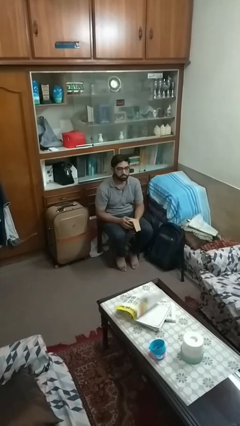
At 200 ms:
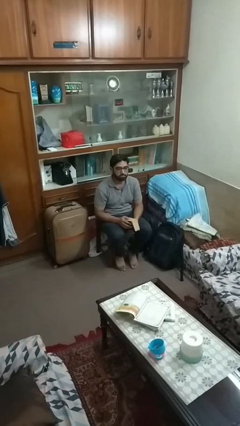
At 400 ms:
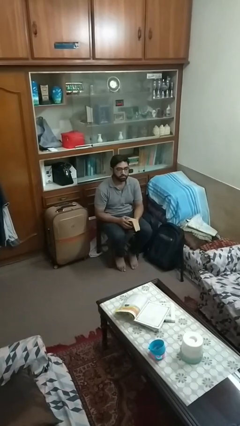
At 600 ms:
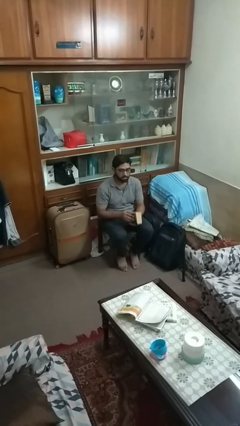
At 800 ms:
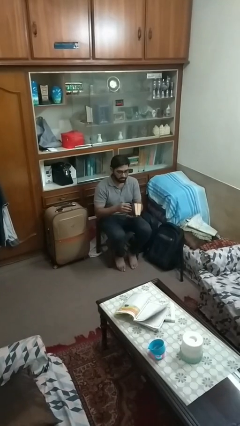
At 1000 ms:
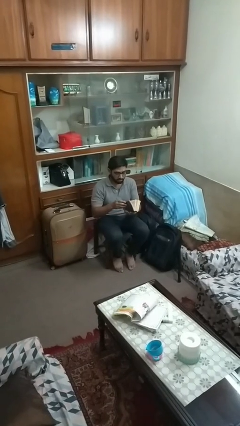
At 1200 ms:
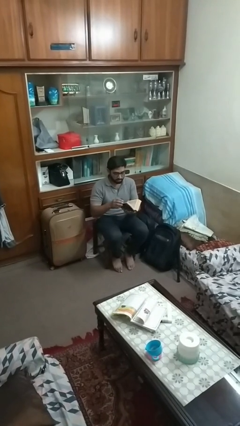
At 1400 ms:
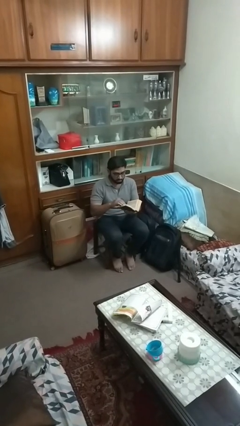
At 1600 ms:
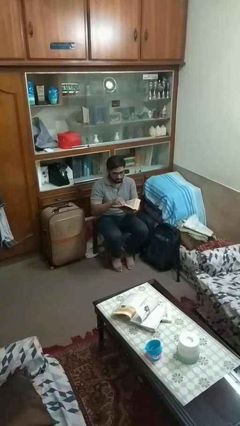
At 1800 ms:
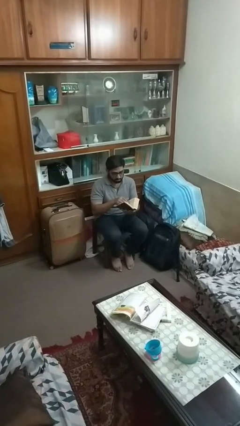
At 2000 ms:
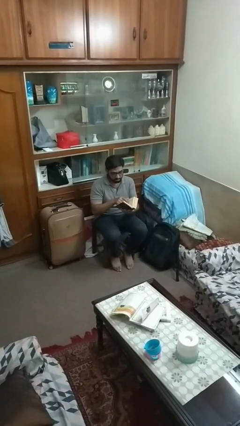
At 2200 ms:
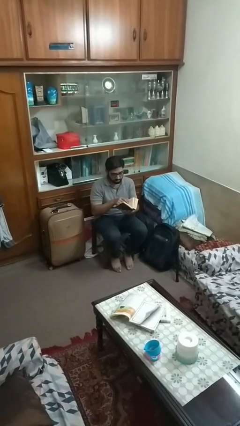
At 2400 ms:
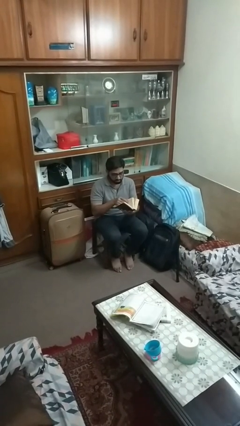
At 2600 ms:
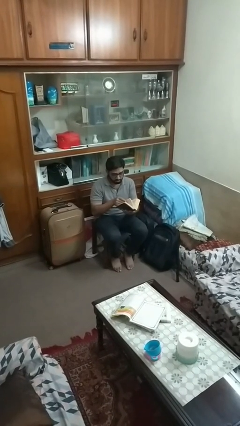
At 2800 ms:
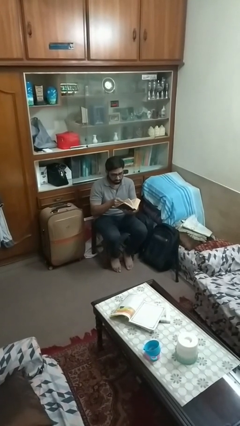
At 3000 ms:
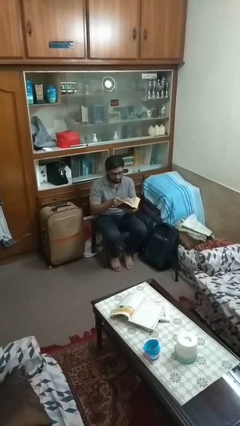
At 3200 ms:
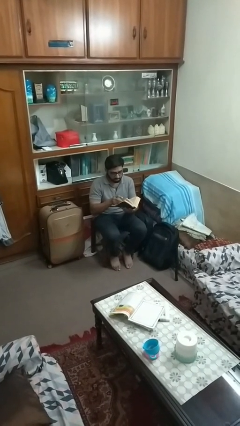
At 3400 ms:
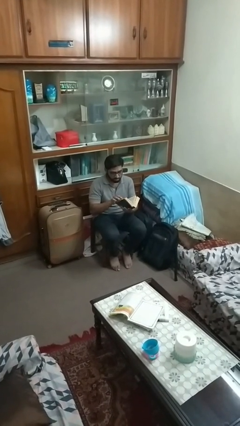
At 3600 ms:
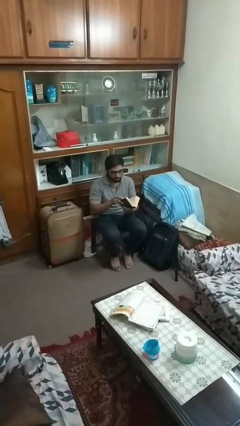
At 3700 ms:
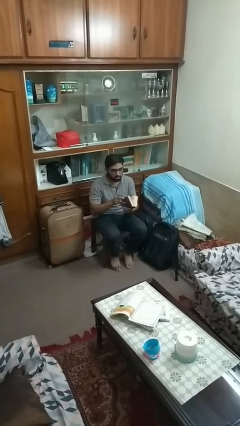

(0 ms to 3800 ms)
person reads book

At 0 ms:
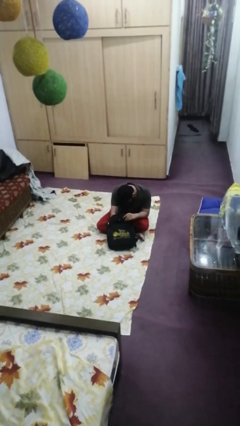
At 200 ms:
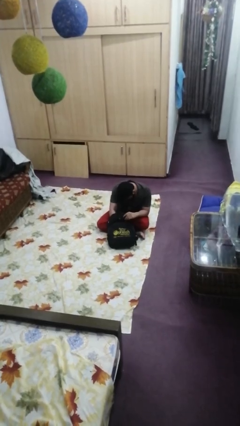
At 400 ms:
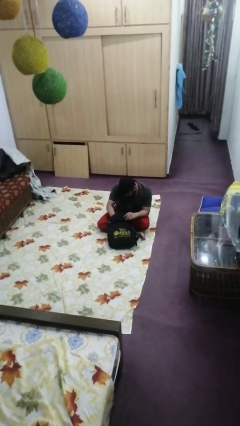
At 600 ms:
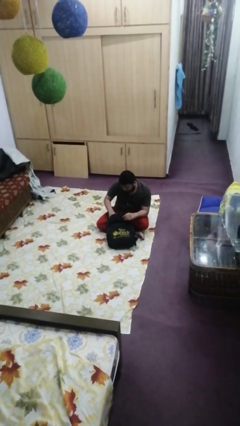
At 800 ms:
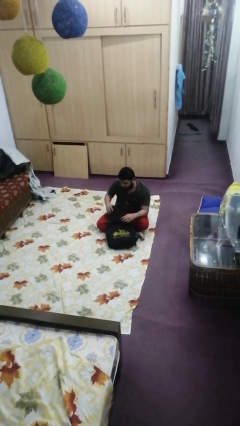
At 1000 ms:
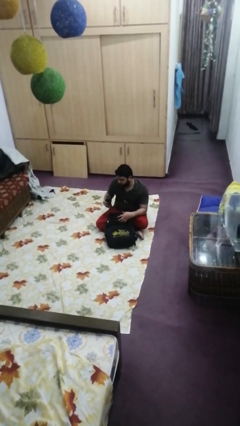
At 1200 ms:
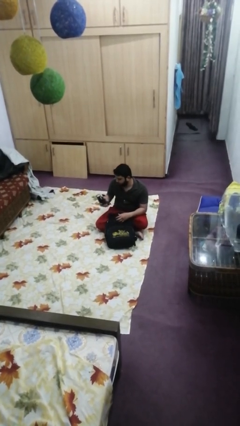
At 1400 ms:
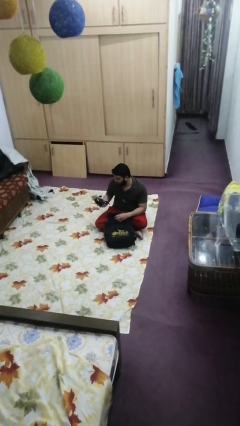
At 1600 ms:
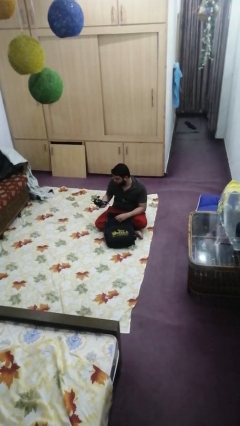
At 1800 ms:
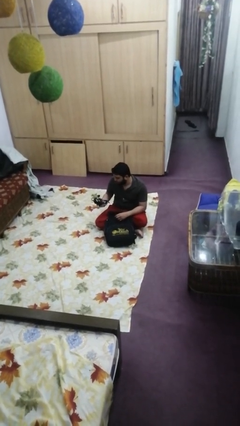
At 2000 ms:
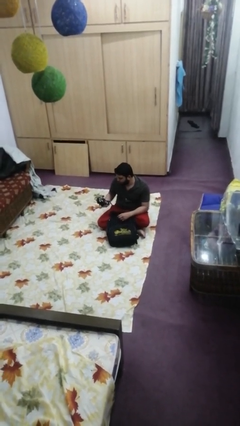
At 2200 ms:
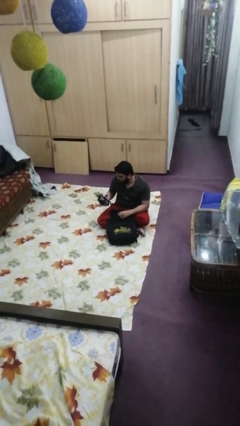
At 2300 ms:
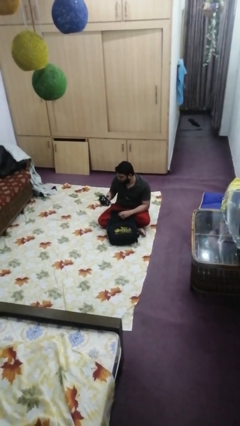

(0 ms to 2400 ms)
person takes object from backpack

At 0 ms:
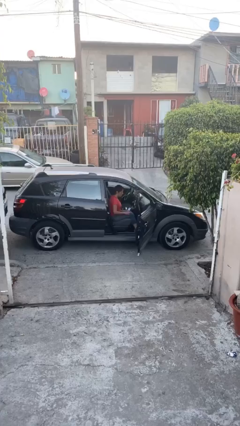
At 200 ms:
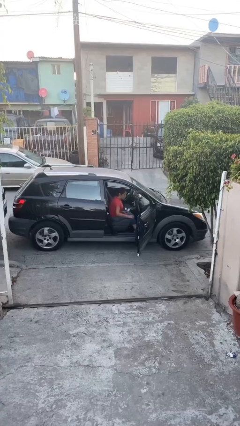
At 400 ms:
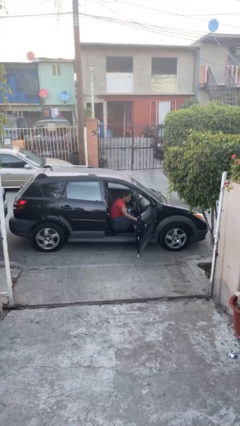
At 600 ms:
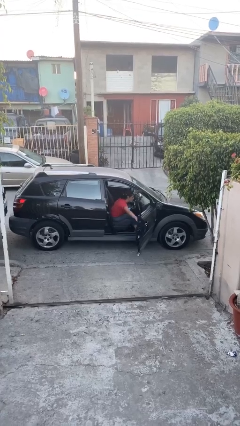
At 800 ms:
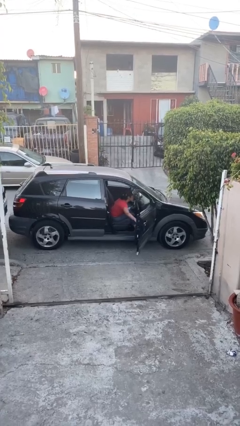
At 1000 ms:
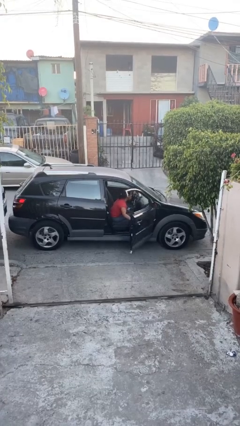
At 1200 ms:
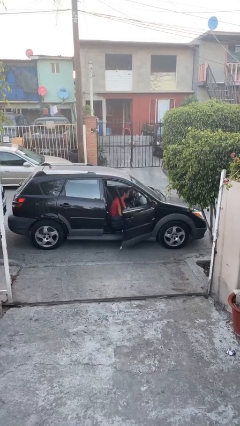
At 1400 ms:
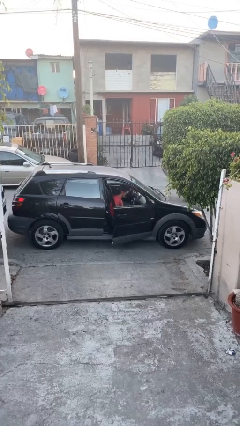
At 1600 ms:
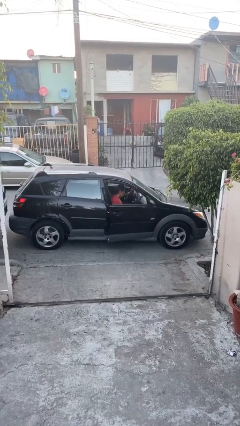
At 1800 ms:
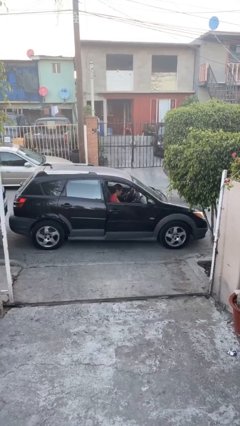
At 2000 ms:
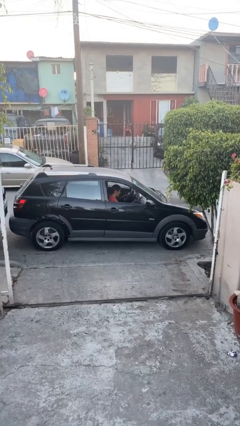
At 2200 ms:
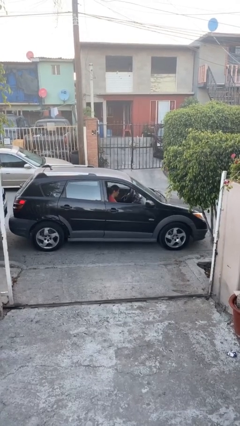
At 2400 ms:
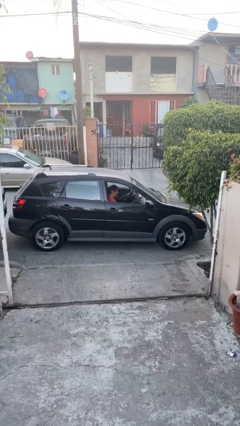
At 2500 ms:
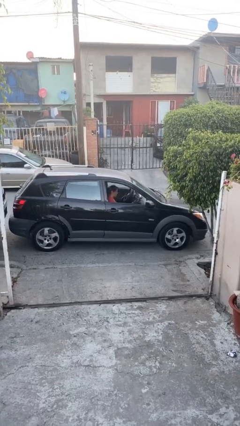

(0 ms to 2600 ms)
person closes car door

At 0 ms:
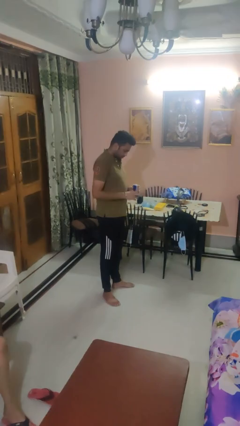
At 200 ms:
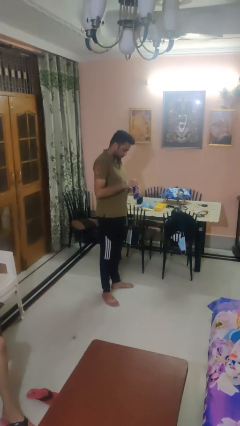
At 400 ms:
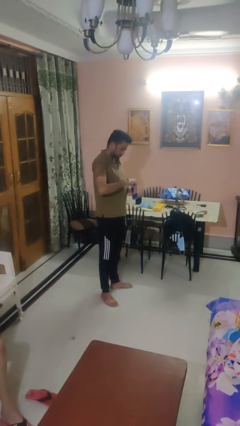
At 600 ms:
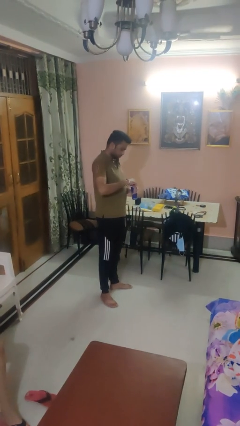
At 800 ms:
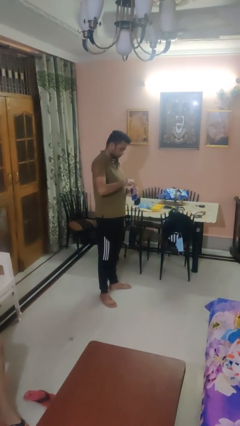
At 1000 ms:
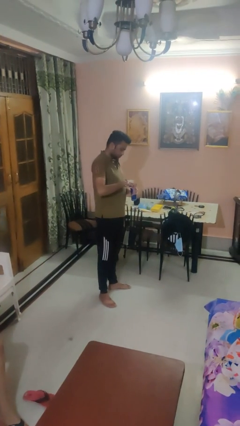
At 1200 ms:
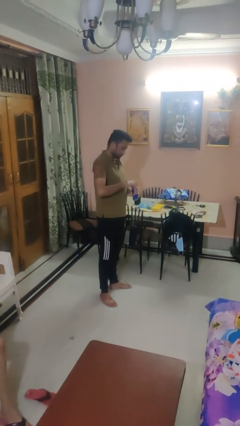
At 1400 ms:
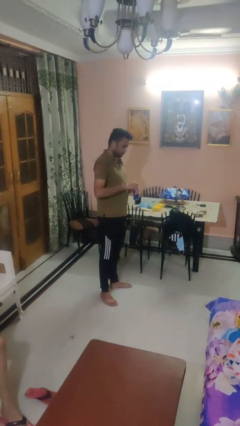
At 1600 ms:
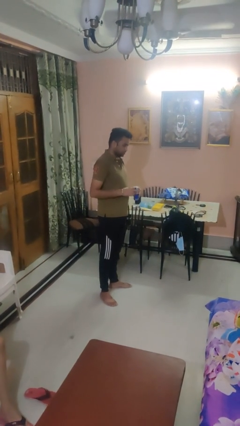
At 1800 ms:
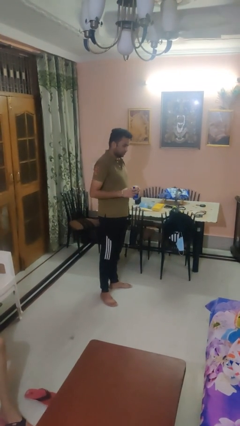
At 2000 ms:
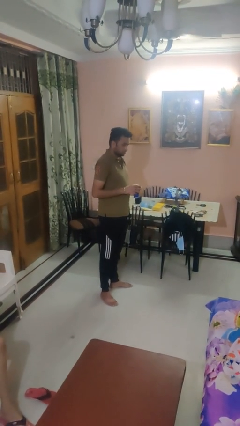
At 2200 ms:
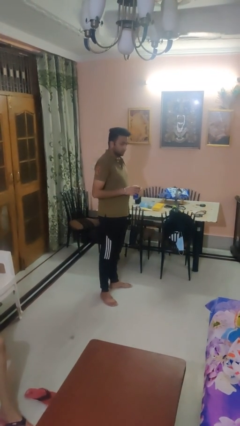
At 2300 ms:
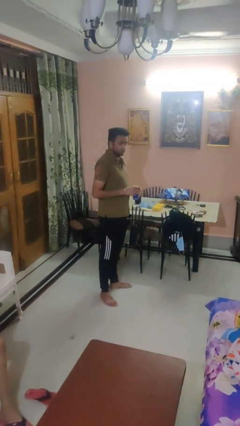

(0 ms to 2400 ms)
person opens beverage can

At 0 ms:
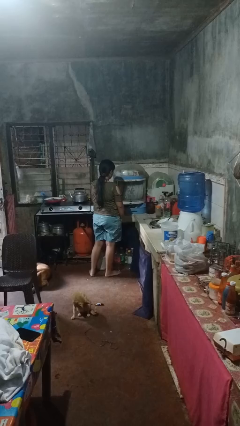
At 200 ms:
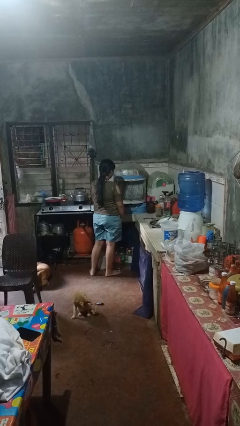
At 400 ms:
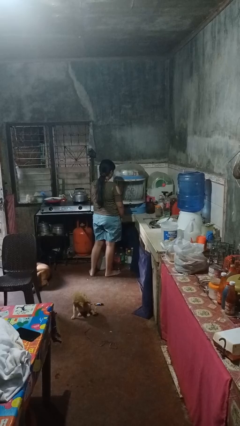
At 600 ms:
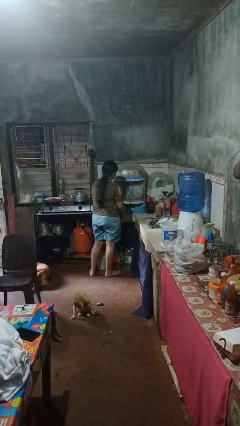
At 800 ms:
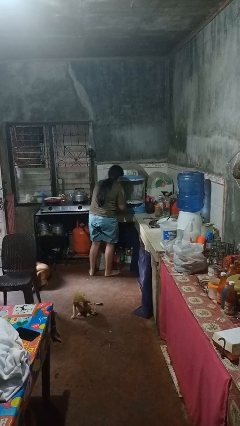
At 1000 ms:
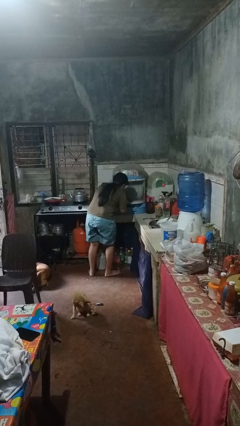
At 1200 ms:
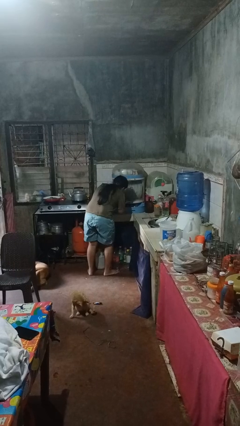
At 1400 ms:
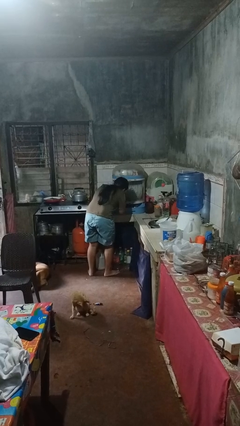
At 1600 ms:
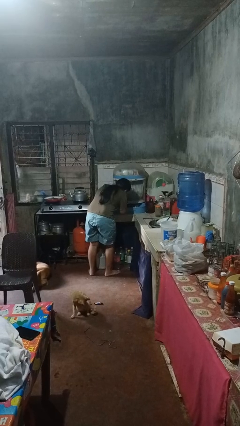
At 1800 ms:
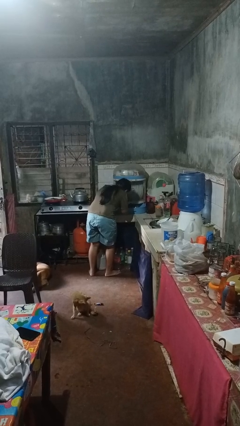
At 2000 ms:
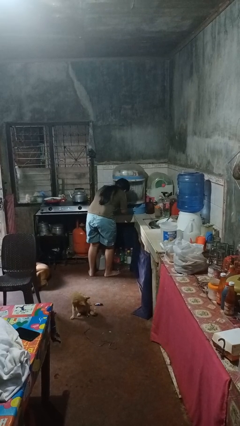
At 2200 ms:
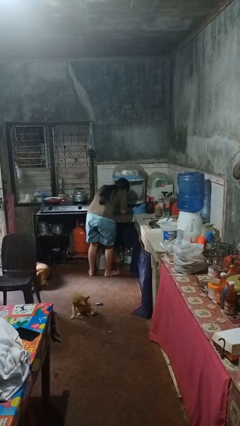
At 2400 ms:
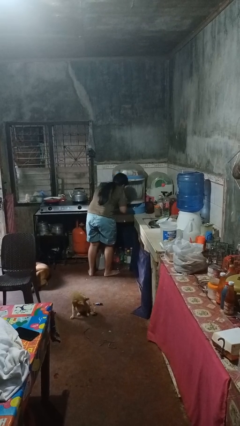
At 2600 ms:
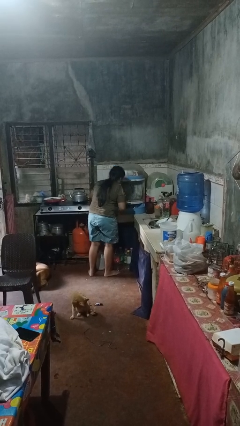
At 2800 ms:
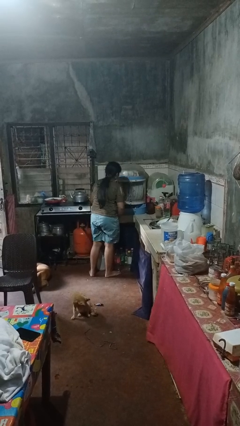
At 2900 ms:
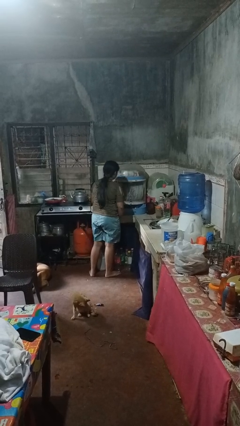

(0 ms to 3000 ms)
person searches in kitchen drawer

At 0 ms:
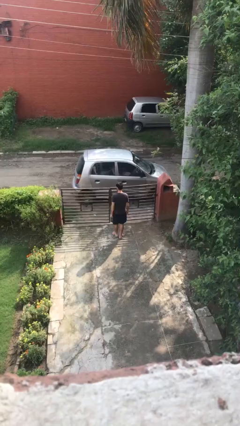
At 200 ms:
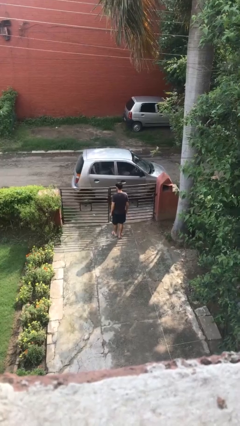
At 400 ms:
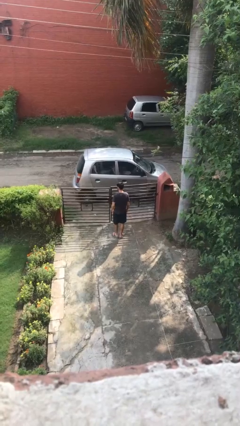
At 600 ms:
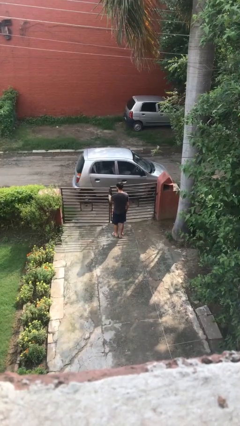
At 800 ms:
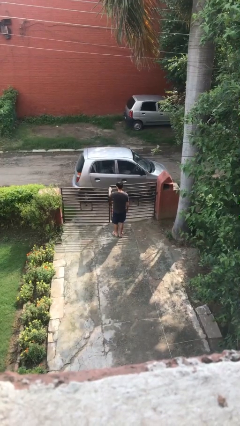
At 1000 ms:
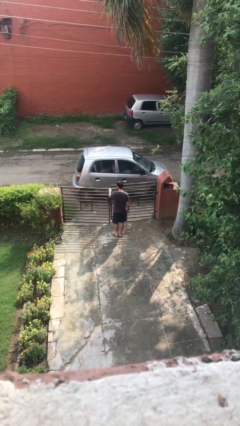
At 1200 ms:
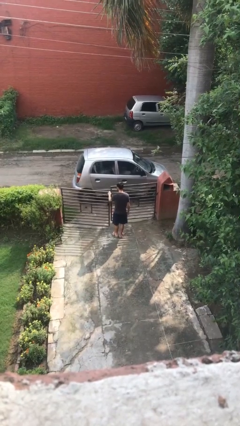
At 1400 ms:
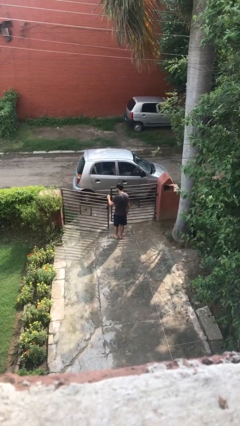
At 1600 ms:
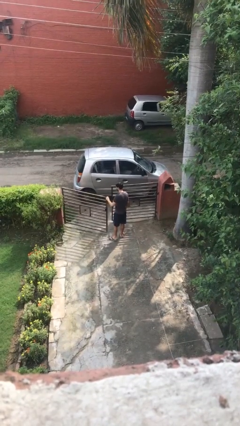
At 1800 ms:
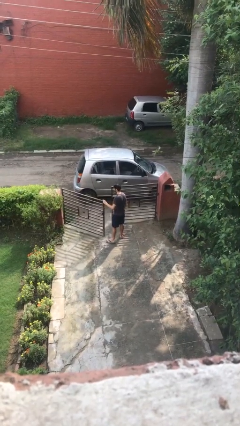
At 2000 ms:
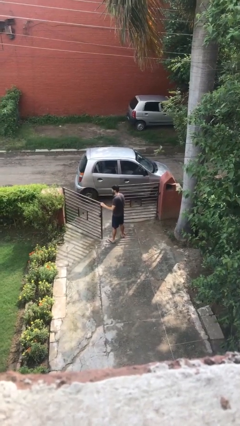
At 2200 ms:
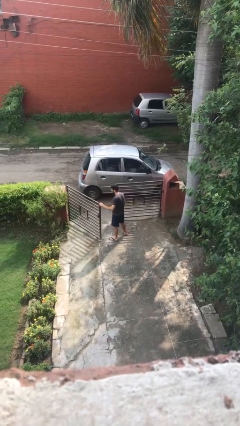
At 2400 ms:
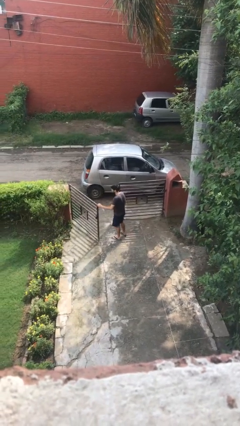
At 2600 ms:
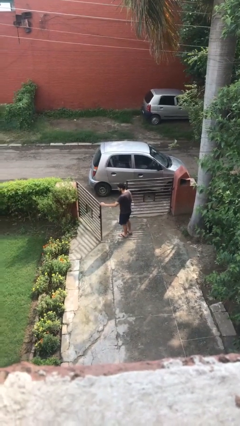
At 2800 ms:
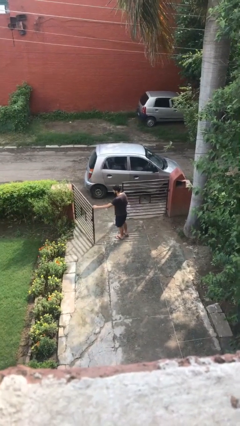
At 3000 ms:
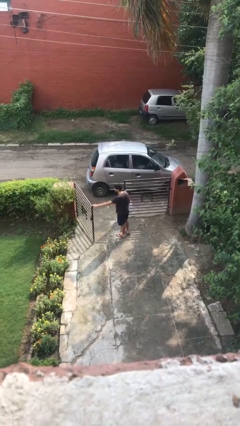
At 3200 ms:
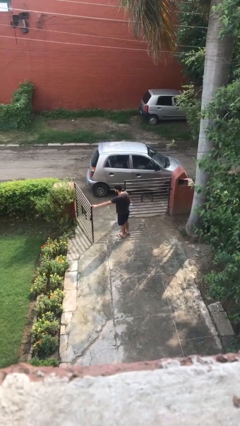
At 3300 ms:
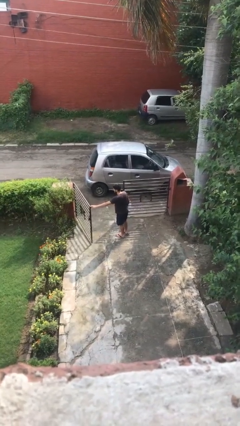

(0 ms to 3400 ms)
person opens gate
